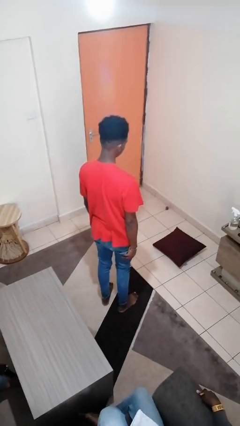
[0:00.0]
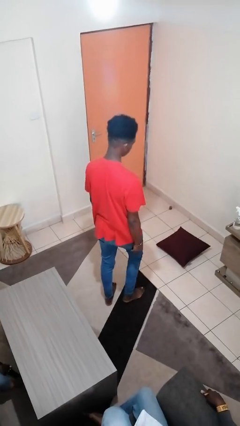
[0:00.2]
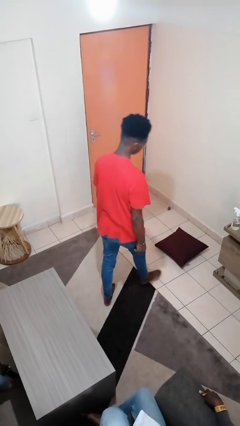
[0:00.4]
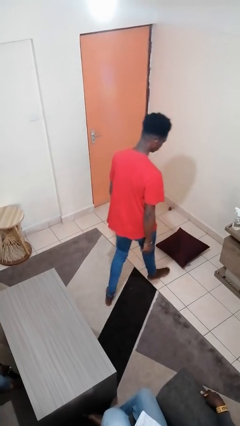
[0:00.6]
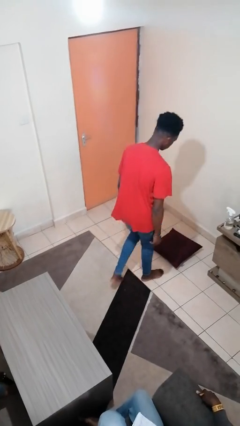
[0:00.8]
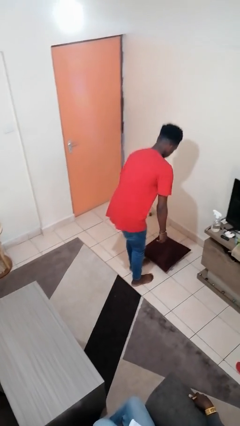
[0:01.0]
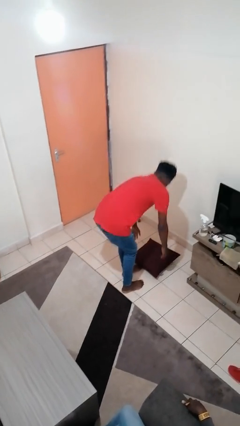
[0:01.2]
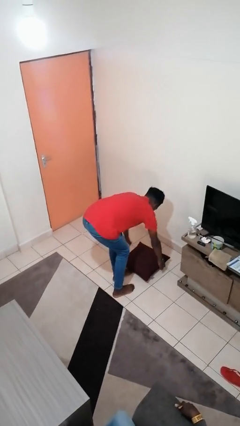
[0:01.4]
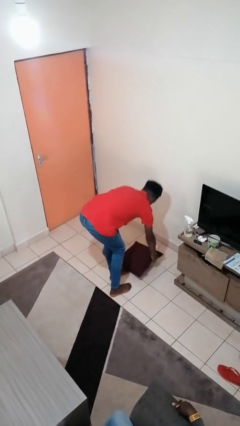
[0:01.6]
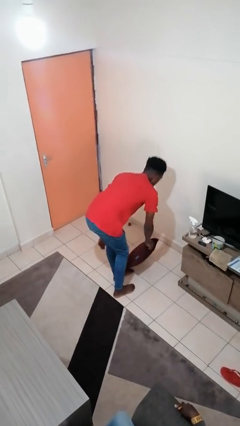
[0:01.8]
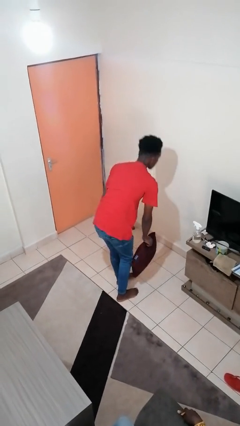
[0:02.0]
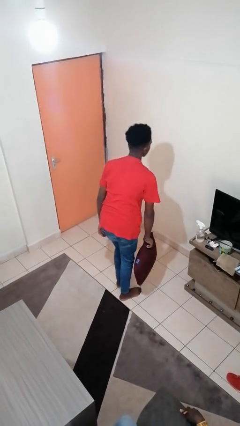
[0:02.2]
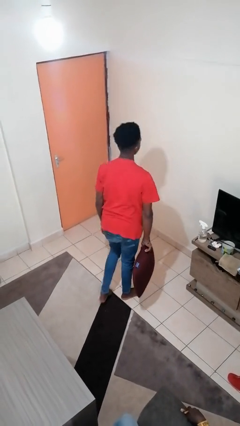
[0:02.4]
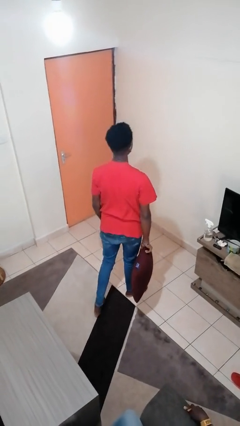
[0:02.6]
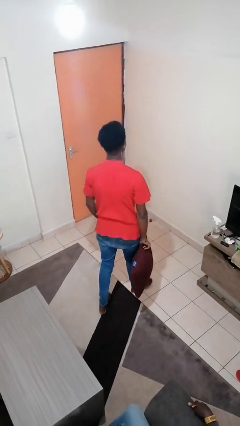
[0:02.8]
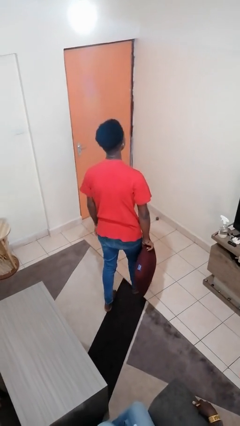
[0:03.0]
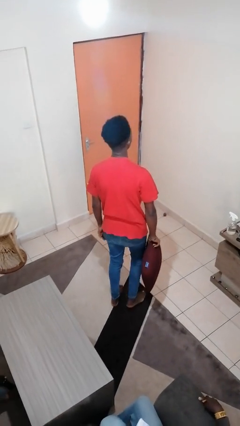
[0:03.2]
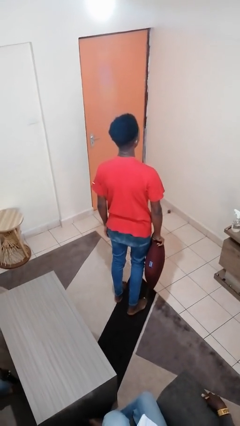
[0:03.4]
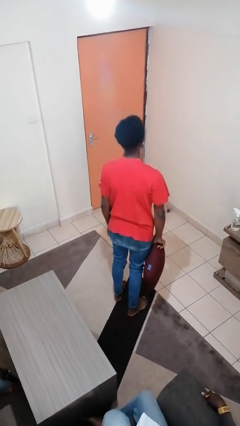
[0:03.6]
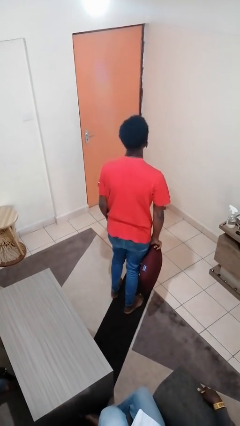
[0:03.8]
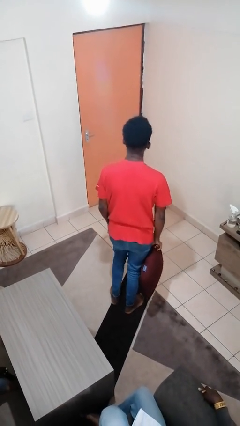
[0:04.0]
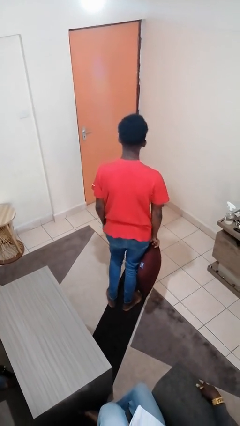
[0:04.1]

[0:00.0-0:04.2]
person picks up object from floor

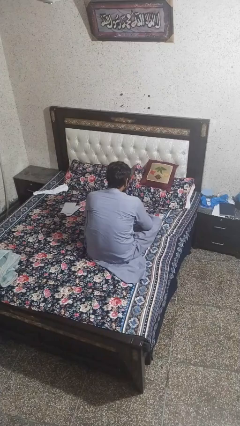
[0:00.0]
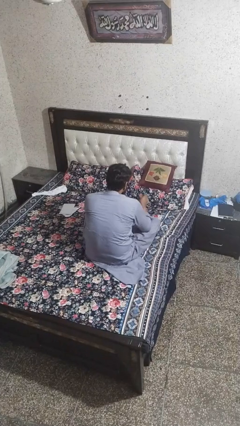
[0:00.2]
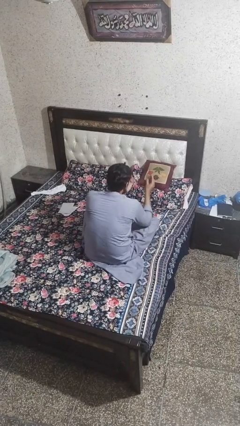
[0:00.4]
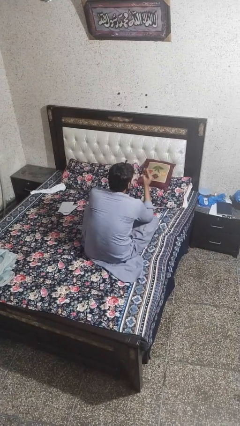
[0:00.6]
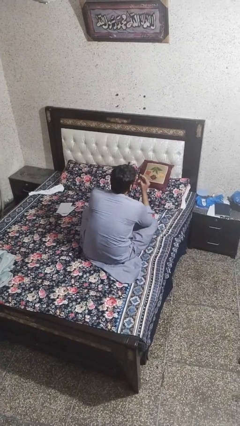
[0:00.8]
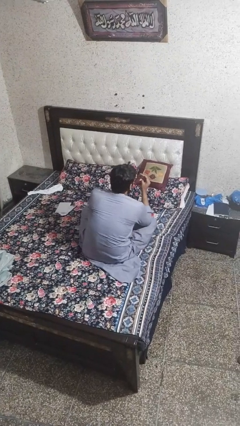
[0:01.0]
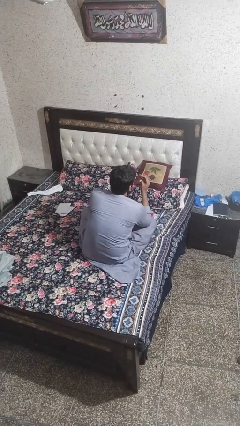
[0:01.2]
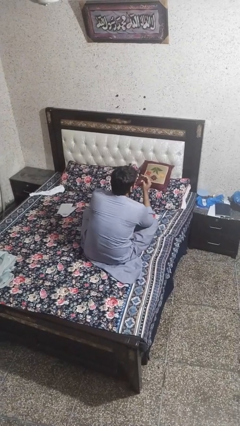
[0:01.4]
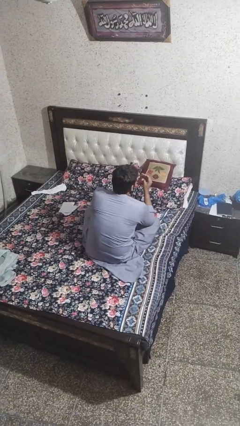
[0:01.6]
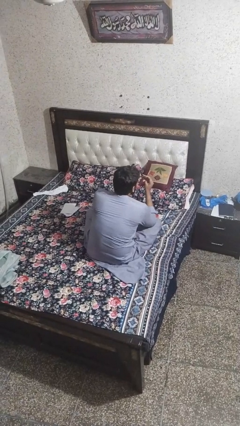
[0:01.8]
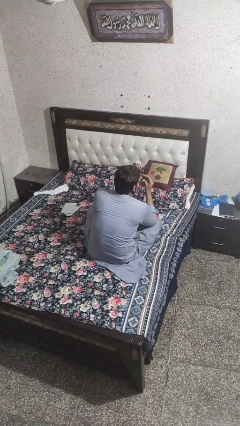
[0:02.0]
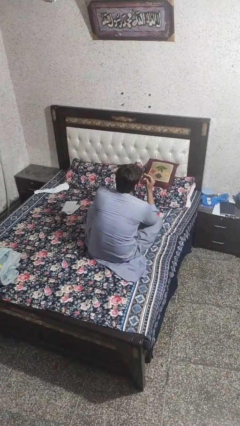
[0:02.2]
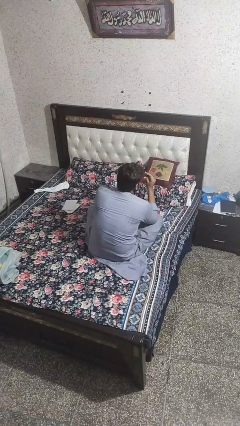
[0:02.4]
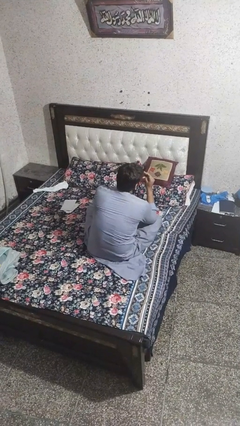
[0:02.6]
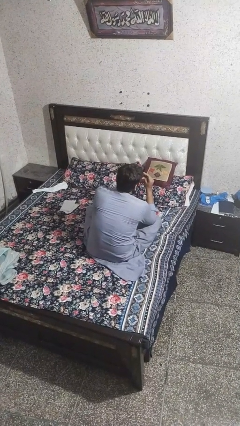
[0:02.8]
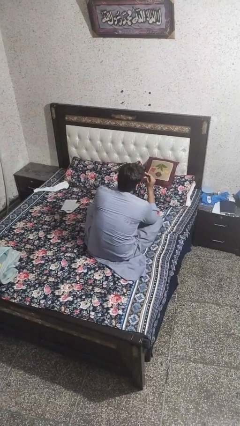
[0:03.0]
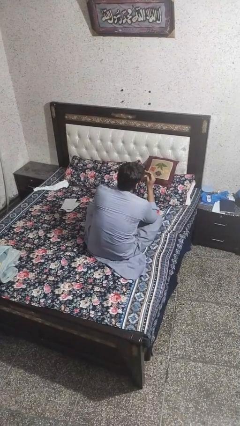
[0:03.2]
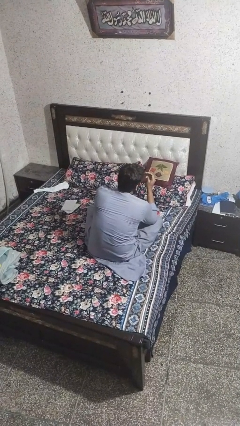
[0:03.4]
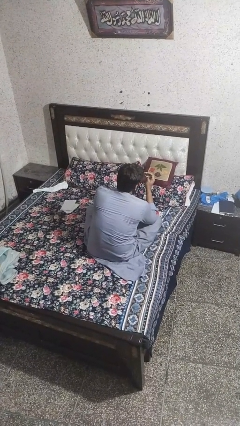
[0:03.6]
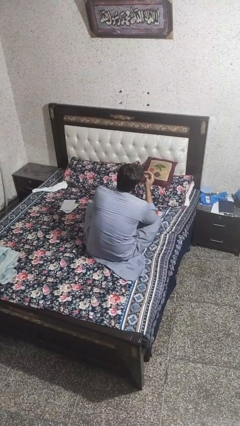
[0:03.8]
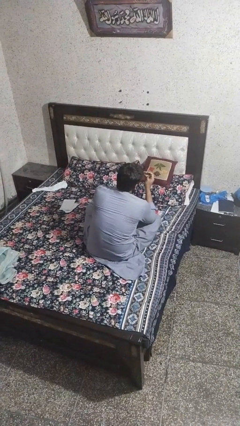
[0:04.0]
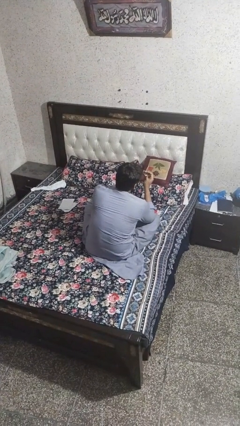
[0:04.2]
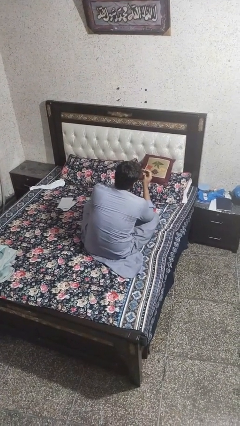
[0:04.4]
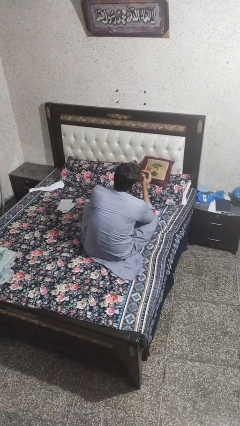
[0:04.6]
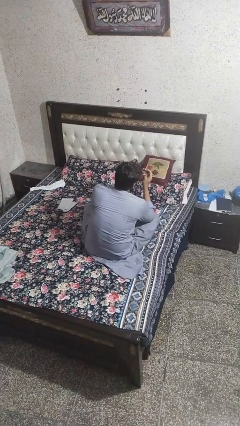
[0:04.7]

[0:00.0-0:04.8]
person clips fingernails

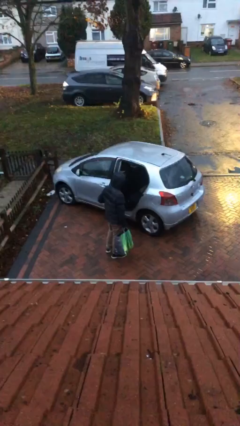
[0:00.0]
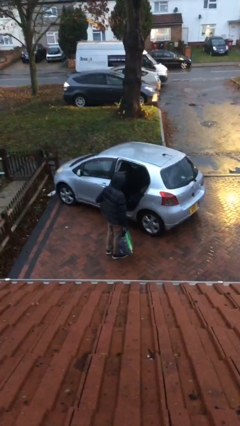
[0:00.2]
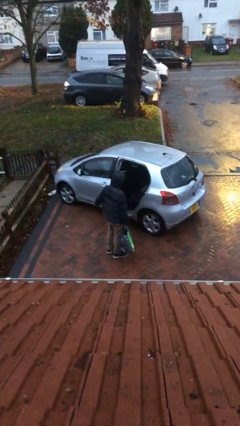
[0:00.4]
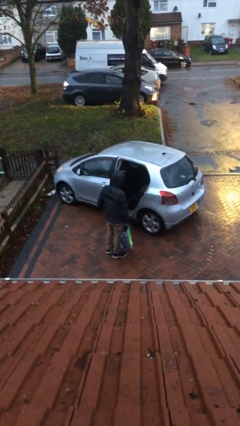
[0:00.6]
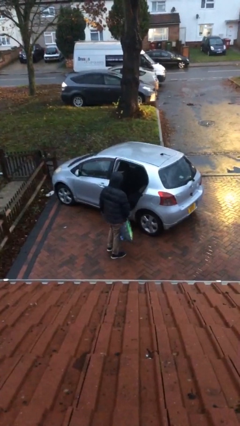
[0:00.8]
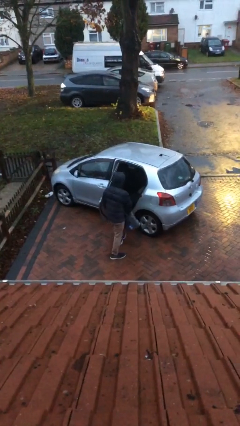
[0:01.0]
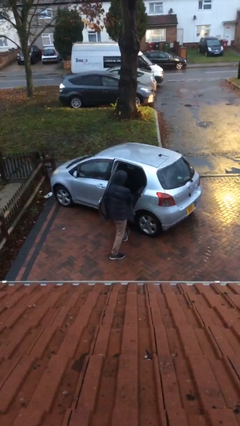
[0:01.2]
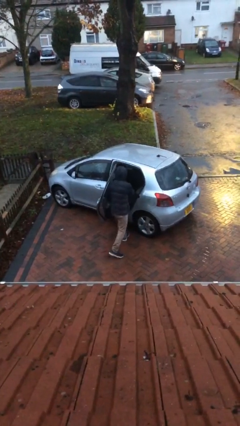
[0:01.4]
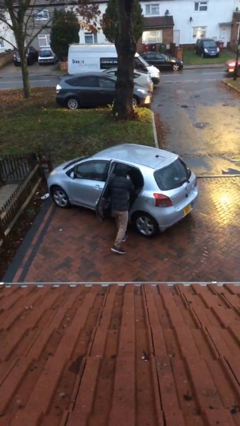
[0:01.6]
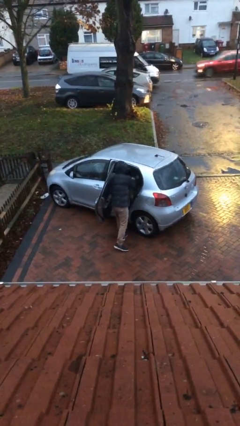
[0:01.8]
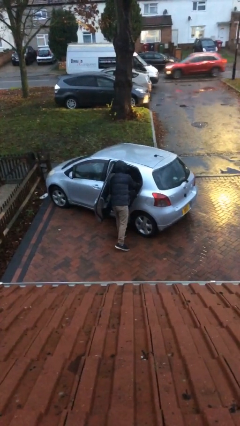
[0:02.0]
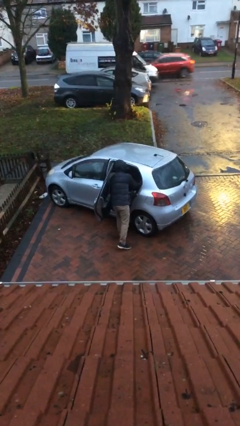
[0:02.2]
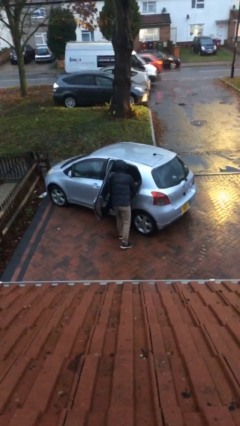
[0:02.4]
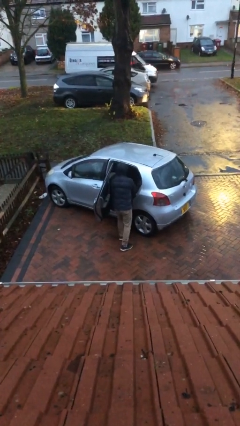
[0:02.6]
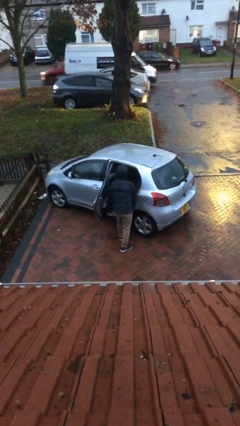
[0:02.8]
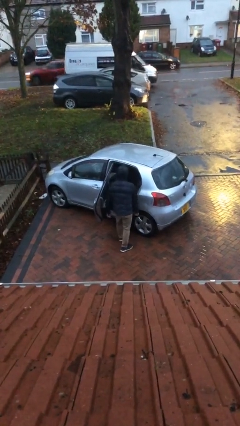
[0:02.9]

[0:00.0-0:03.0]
person loads car

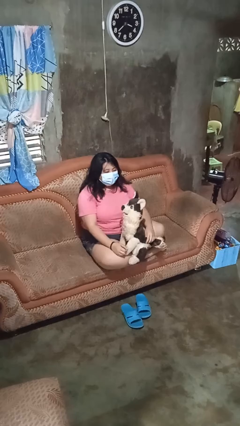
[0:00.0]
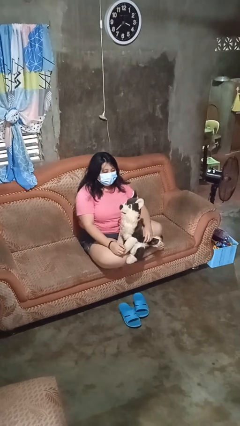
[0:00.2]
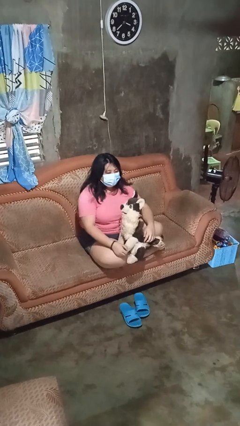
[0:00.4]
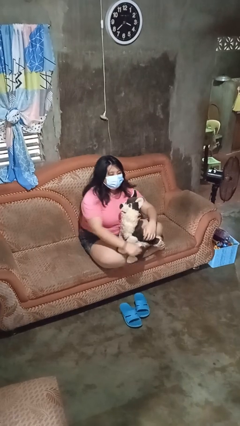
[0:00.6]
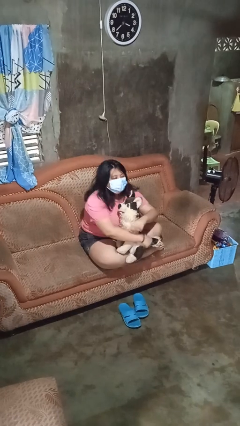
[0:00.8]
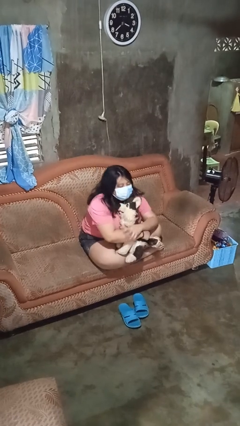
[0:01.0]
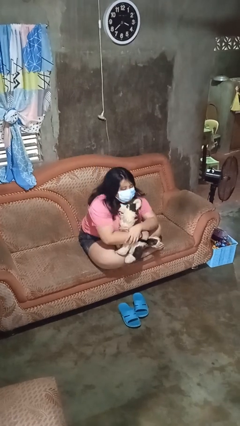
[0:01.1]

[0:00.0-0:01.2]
person hugs stuffed animal

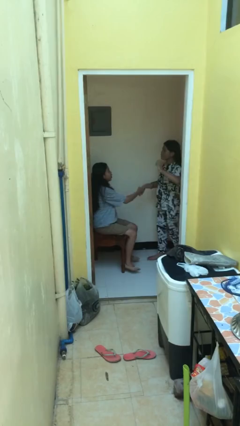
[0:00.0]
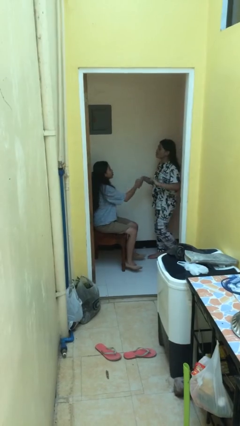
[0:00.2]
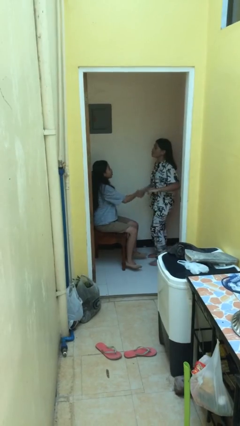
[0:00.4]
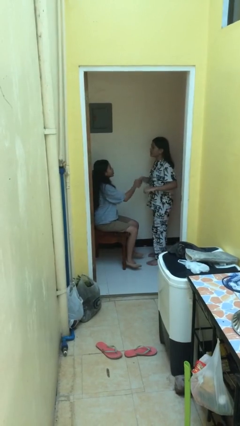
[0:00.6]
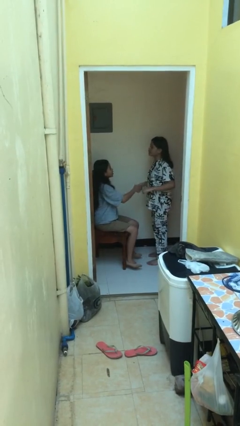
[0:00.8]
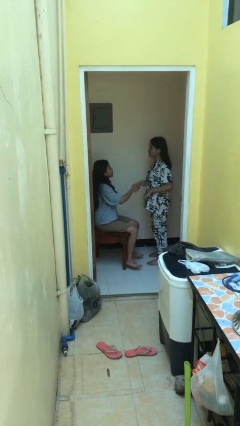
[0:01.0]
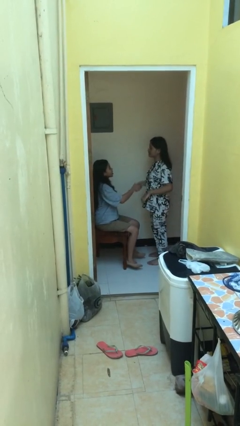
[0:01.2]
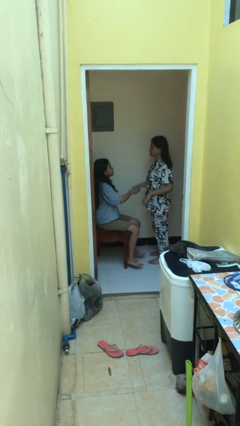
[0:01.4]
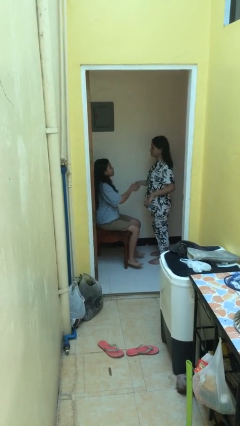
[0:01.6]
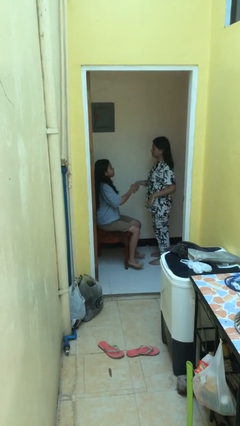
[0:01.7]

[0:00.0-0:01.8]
person shakes hand

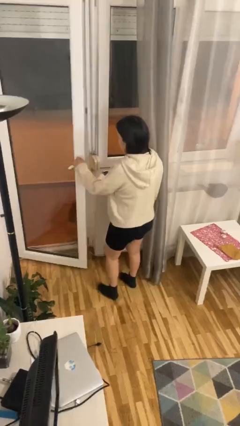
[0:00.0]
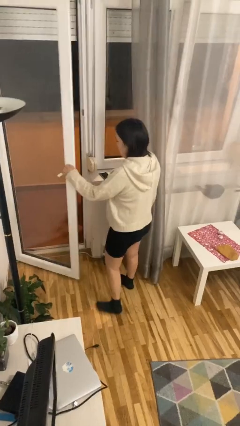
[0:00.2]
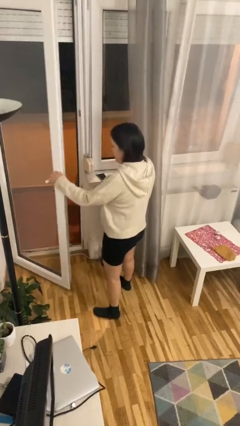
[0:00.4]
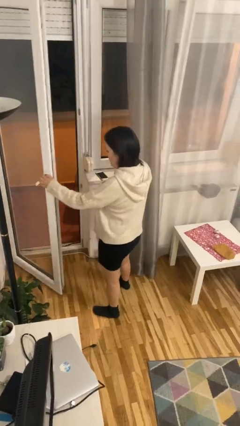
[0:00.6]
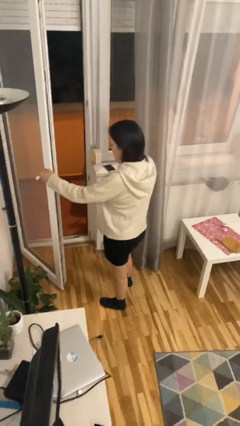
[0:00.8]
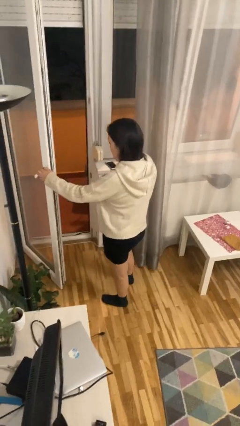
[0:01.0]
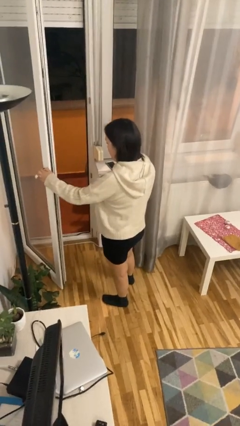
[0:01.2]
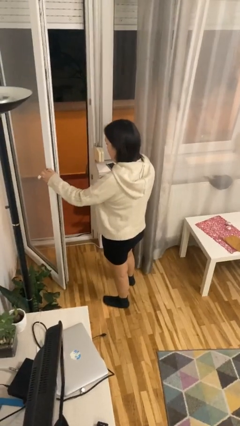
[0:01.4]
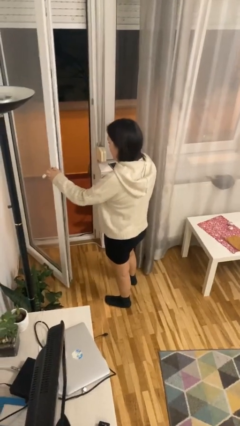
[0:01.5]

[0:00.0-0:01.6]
person opens facility door

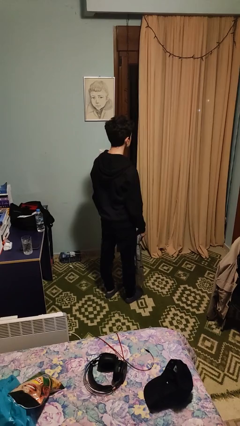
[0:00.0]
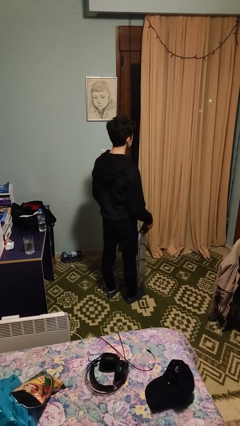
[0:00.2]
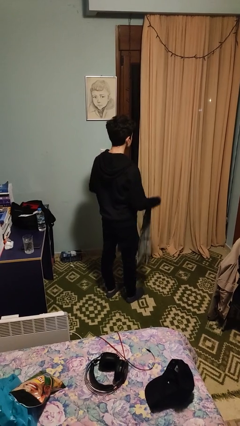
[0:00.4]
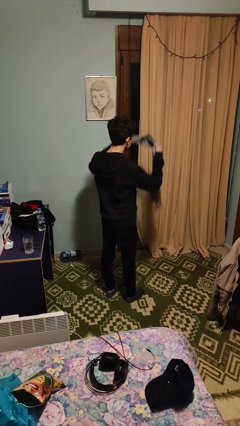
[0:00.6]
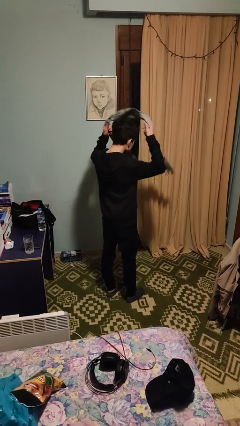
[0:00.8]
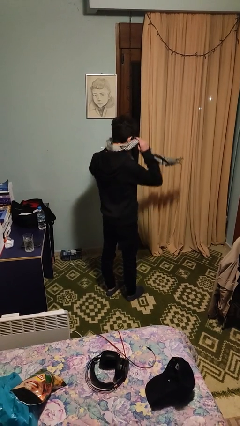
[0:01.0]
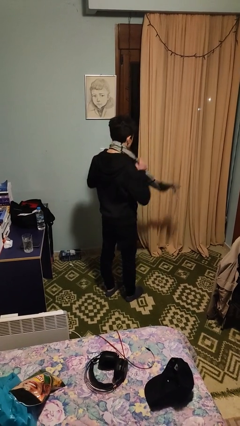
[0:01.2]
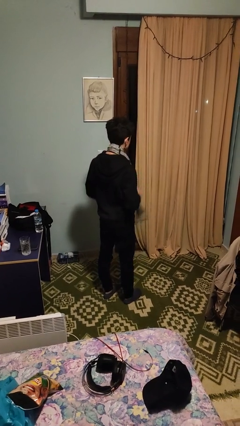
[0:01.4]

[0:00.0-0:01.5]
person puts on scarf
